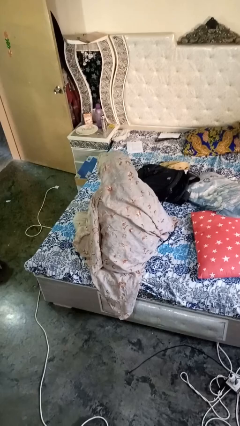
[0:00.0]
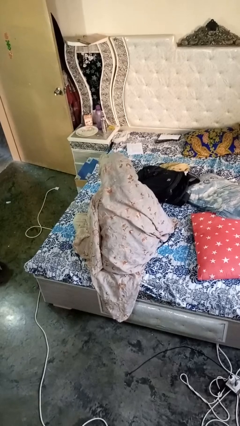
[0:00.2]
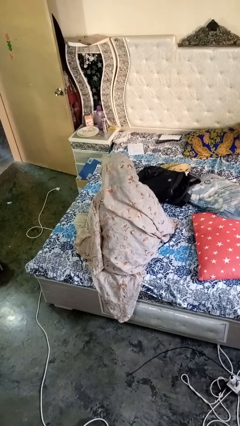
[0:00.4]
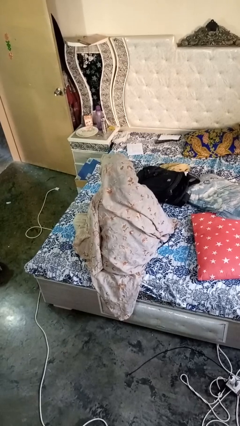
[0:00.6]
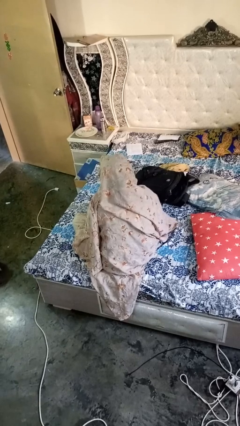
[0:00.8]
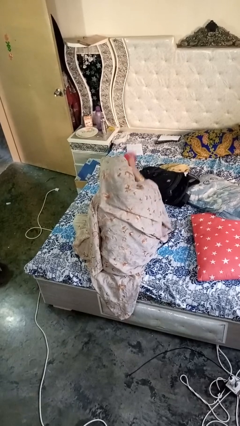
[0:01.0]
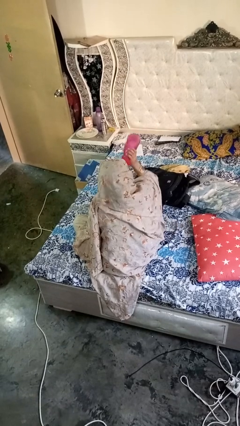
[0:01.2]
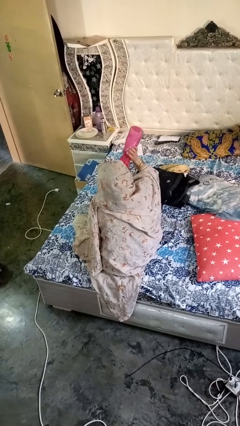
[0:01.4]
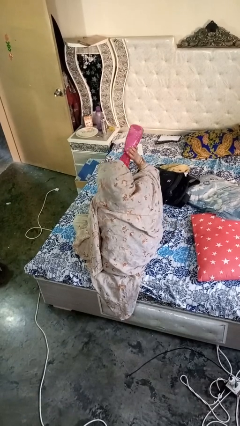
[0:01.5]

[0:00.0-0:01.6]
person drinks from bottle

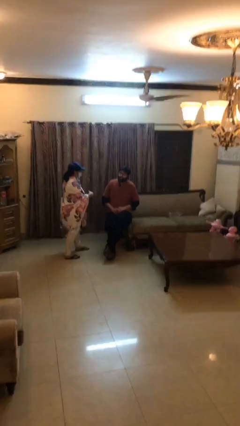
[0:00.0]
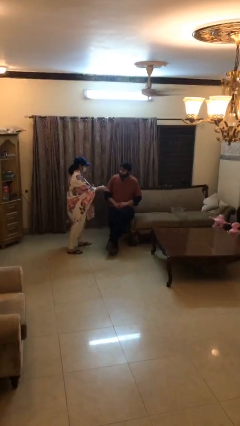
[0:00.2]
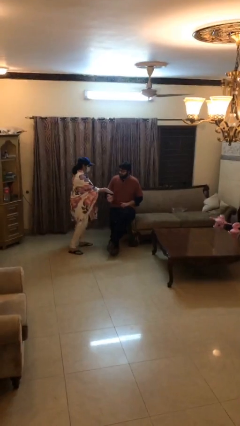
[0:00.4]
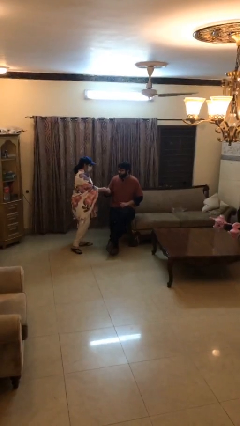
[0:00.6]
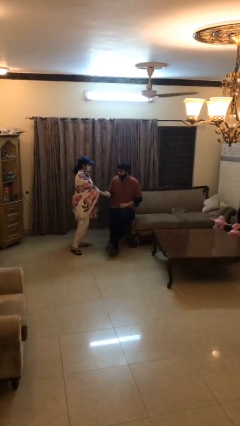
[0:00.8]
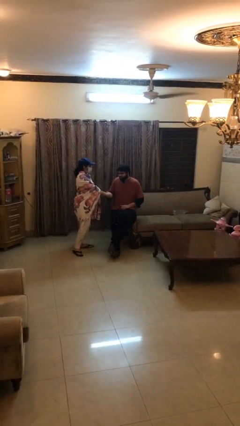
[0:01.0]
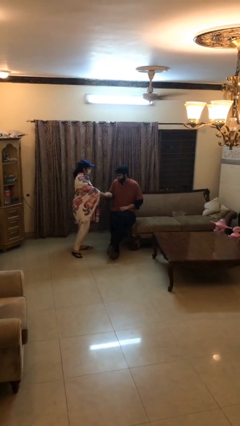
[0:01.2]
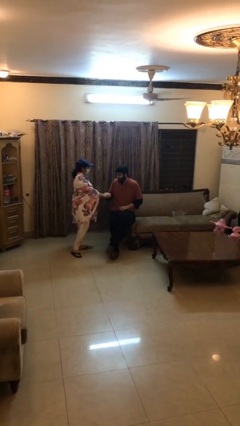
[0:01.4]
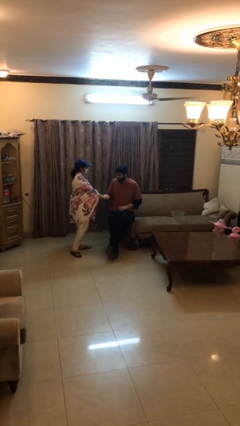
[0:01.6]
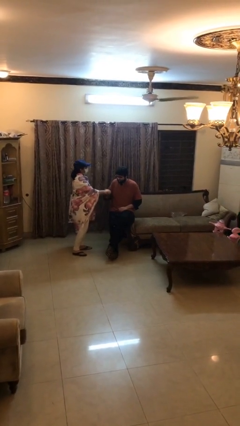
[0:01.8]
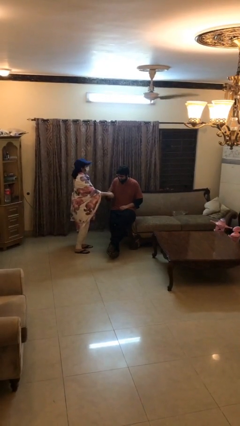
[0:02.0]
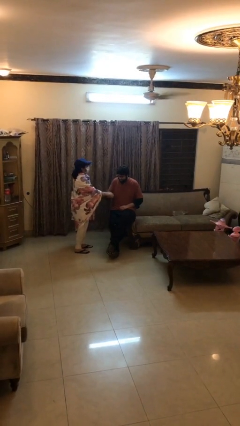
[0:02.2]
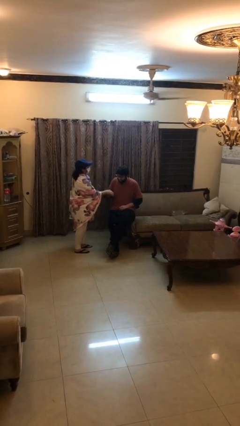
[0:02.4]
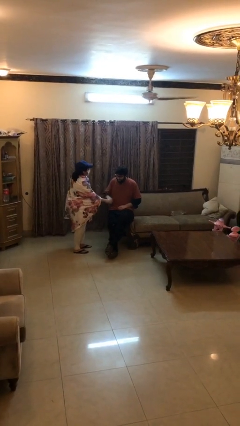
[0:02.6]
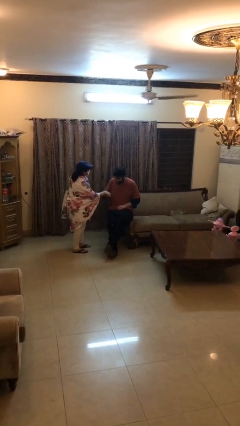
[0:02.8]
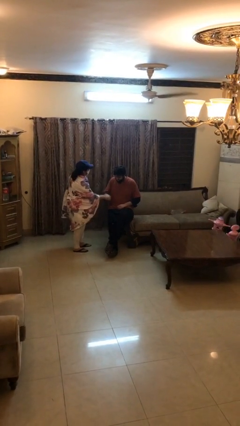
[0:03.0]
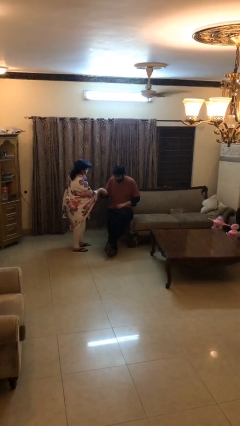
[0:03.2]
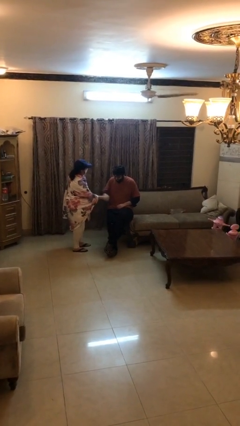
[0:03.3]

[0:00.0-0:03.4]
person shakes hand

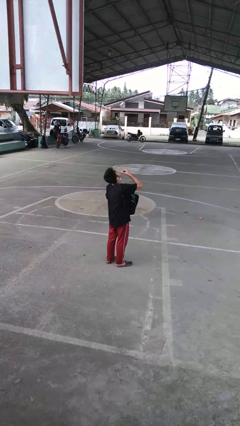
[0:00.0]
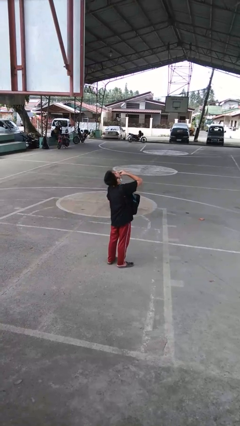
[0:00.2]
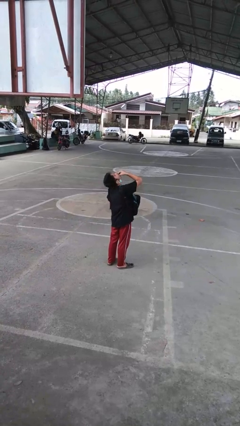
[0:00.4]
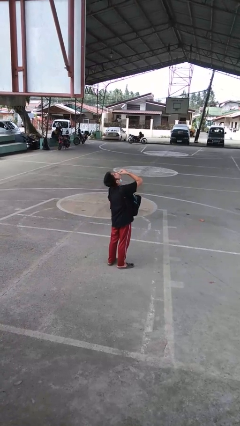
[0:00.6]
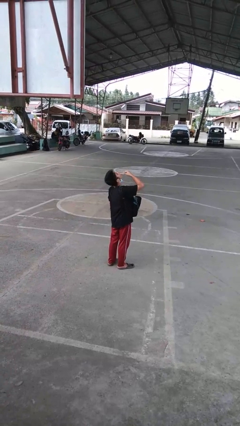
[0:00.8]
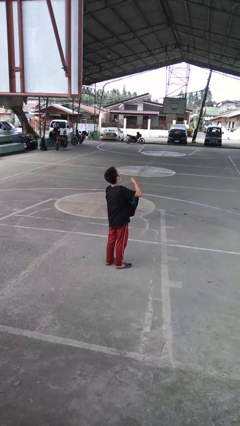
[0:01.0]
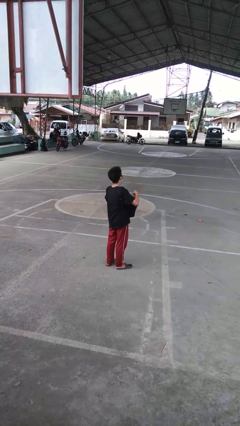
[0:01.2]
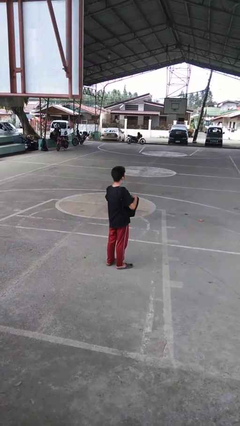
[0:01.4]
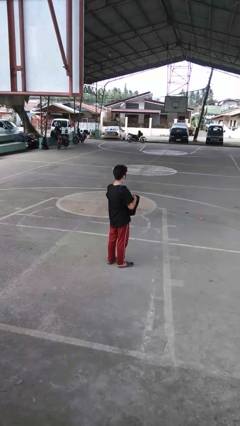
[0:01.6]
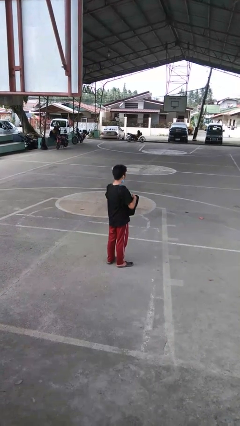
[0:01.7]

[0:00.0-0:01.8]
person eats snack from bag

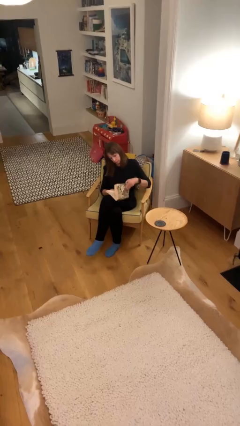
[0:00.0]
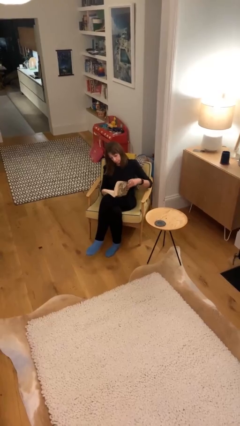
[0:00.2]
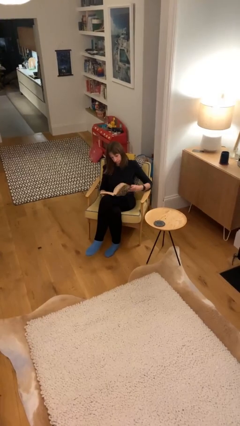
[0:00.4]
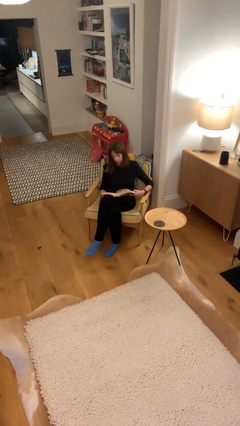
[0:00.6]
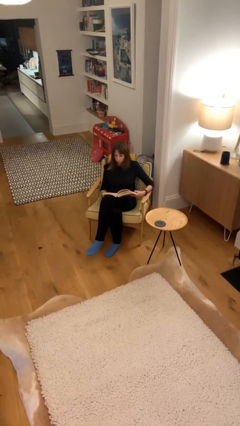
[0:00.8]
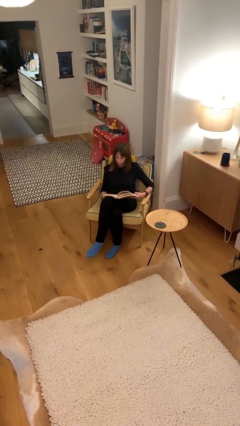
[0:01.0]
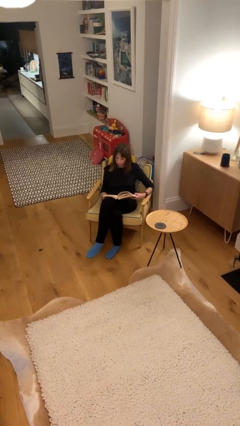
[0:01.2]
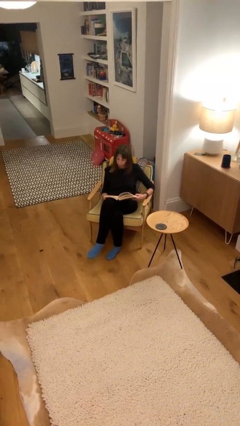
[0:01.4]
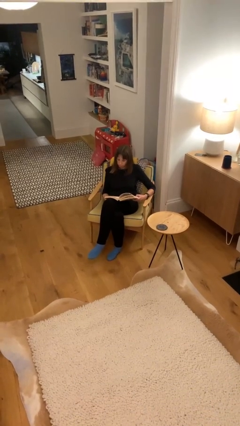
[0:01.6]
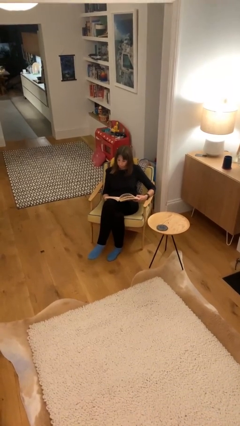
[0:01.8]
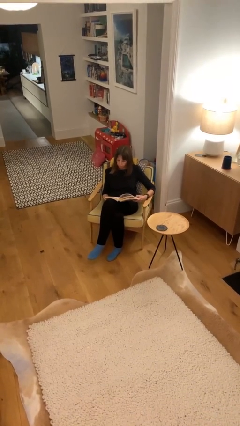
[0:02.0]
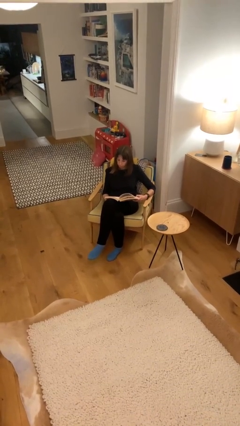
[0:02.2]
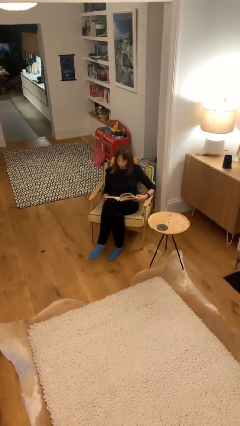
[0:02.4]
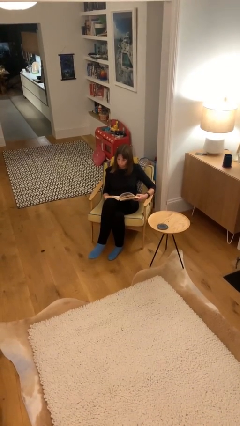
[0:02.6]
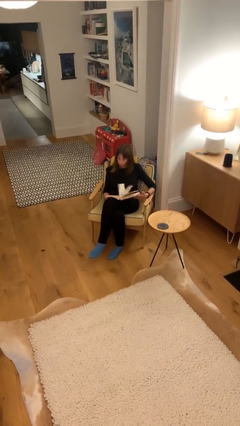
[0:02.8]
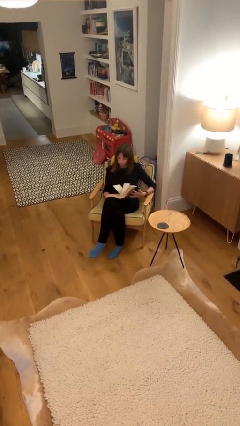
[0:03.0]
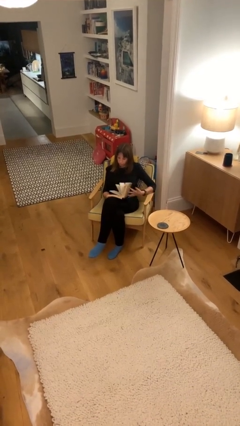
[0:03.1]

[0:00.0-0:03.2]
person reads document

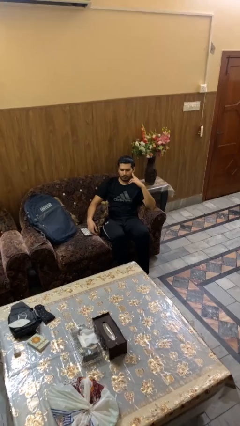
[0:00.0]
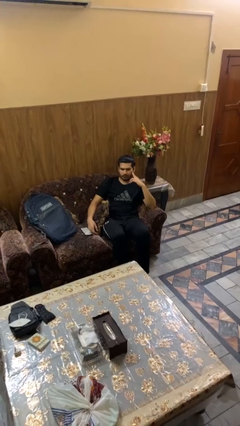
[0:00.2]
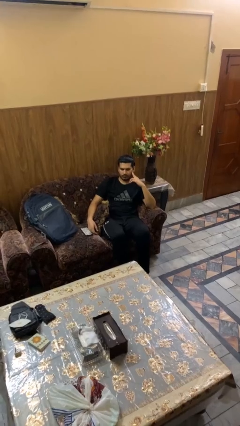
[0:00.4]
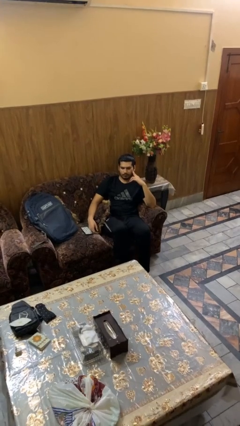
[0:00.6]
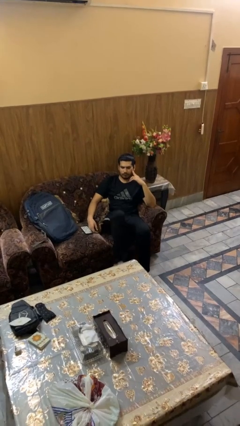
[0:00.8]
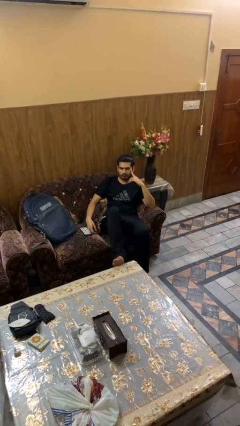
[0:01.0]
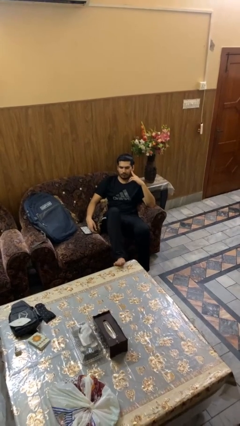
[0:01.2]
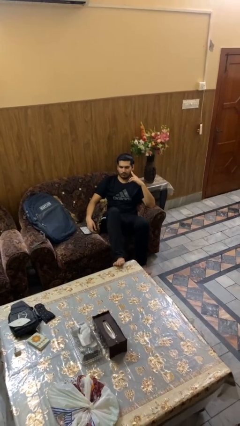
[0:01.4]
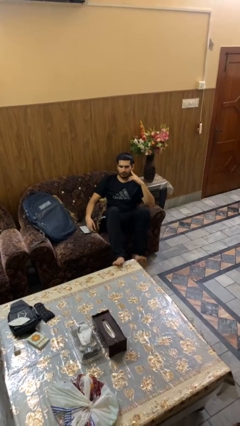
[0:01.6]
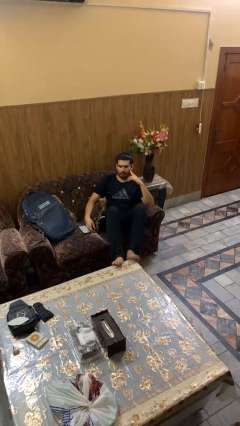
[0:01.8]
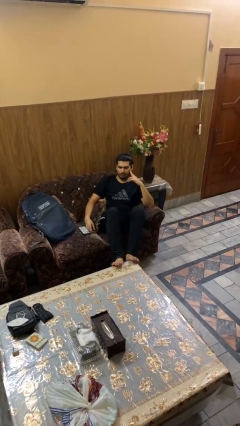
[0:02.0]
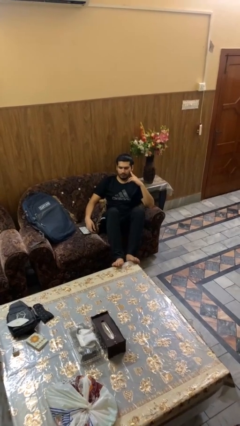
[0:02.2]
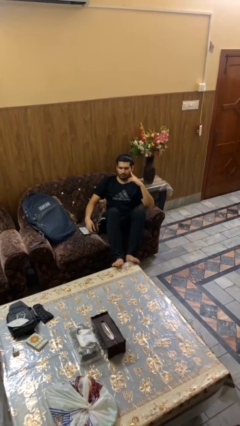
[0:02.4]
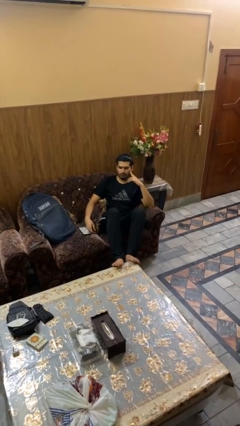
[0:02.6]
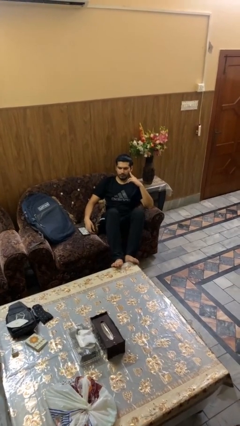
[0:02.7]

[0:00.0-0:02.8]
person puts feet up

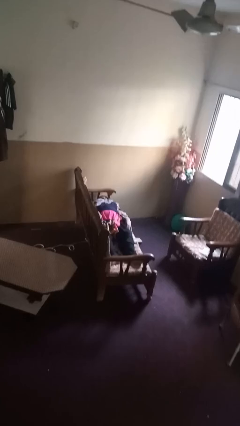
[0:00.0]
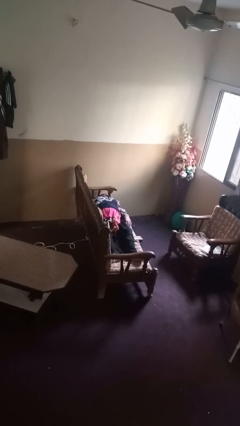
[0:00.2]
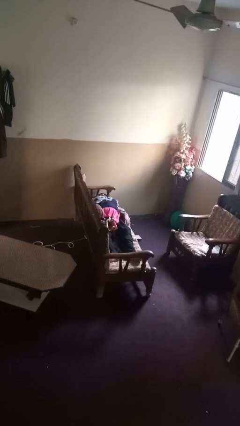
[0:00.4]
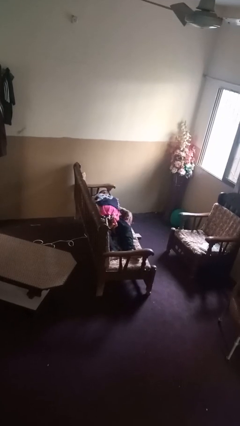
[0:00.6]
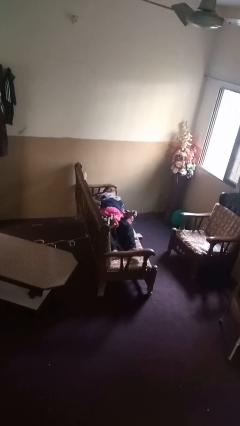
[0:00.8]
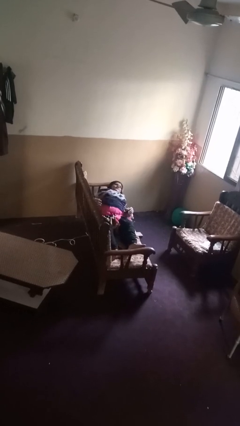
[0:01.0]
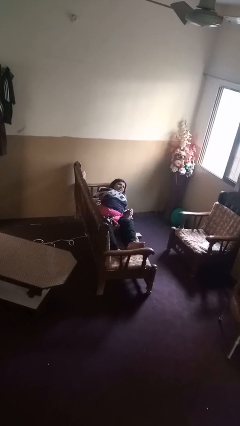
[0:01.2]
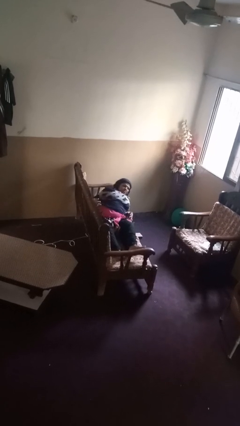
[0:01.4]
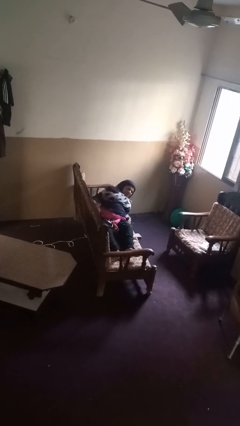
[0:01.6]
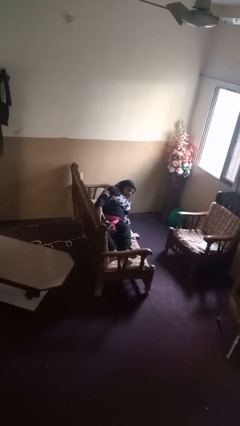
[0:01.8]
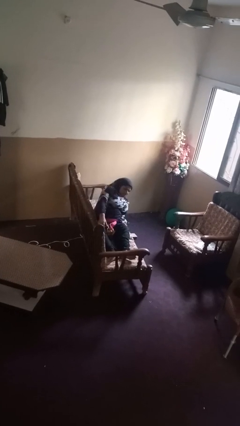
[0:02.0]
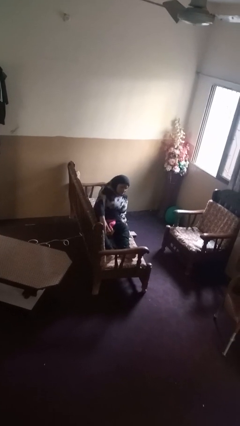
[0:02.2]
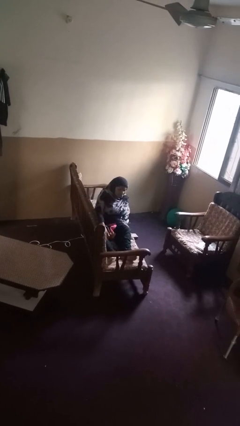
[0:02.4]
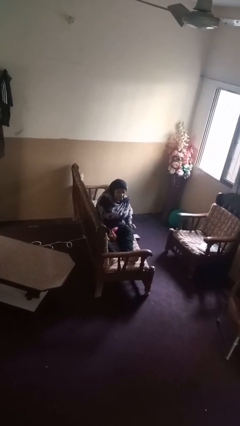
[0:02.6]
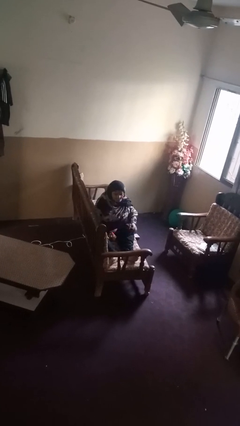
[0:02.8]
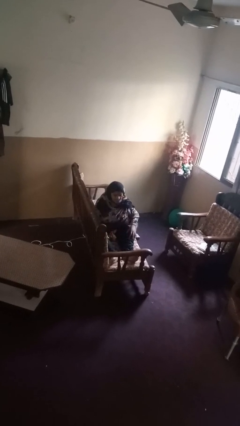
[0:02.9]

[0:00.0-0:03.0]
person stands up

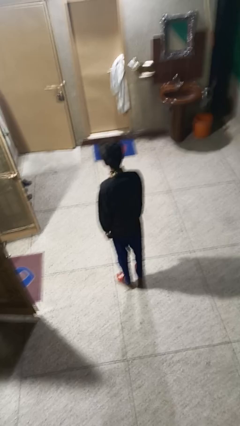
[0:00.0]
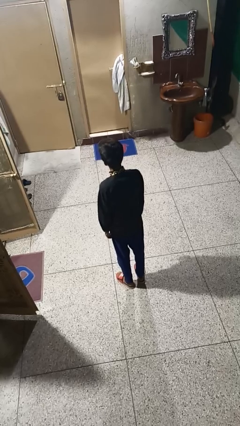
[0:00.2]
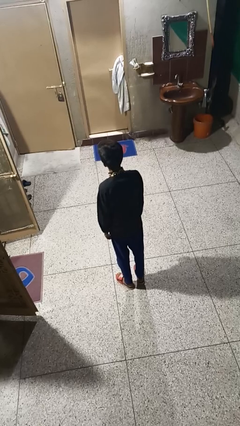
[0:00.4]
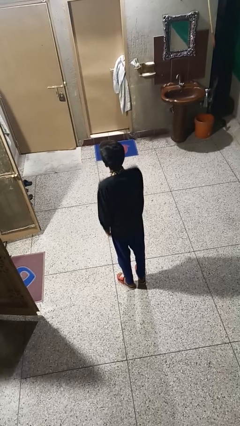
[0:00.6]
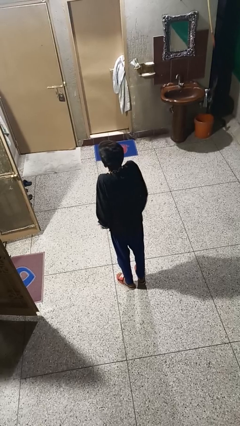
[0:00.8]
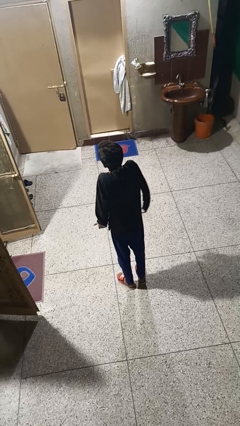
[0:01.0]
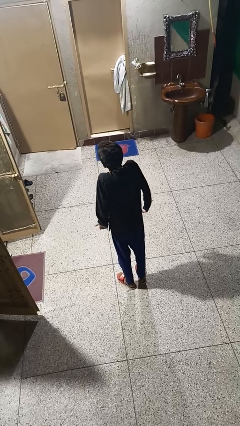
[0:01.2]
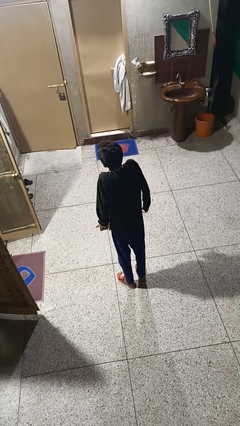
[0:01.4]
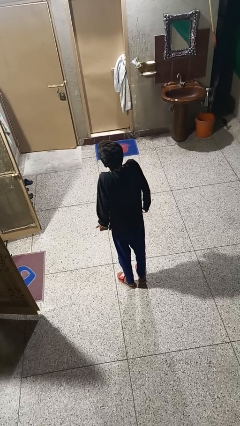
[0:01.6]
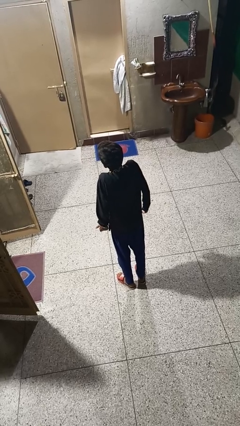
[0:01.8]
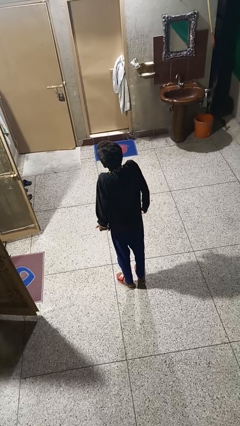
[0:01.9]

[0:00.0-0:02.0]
person shrugs
